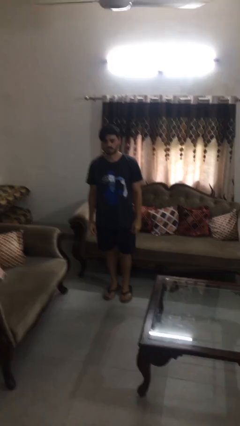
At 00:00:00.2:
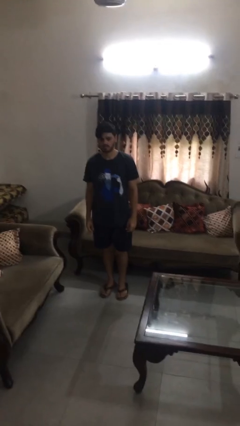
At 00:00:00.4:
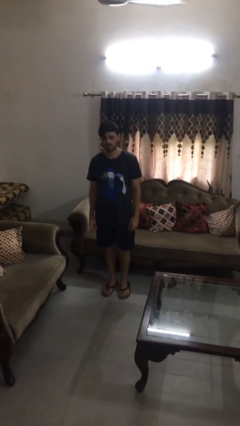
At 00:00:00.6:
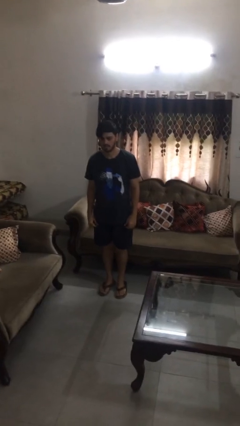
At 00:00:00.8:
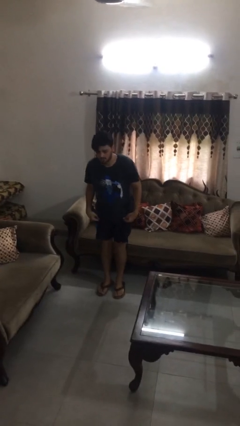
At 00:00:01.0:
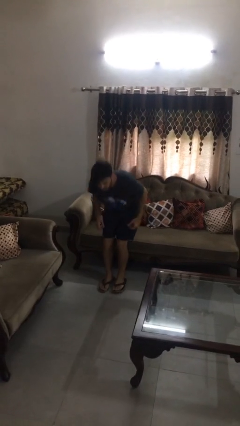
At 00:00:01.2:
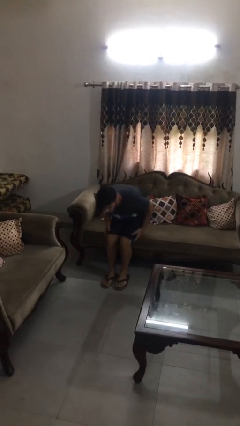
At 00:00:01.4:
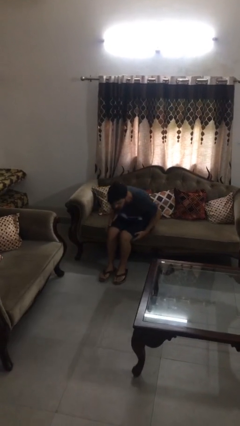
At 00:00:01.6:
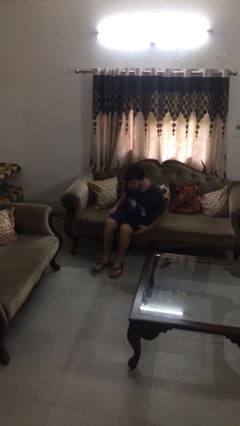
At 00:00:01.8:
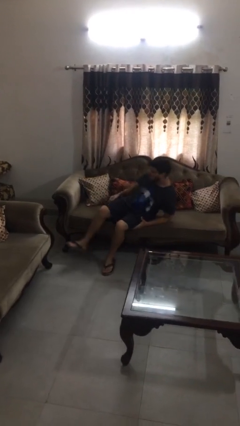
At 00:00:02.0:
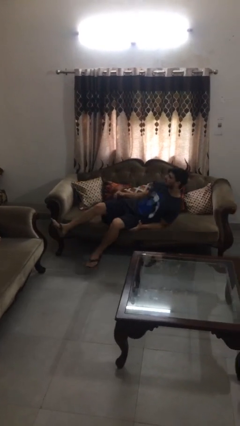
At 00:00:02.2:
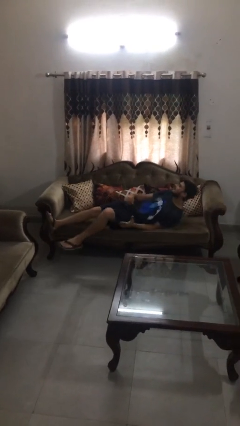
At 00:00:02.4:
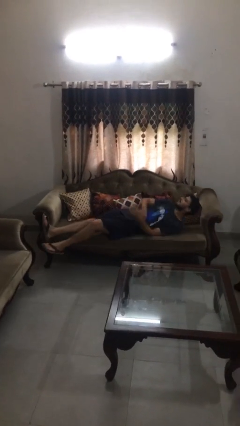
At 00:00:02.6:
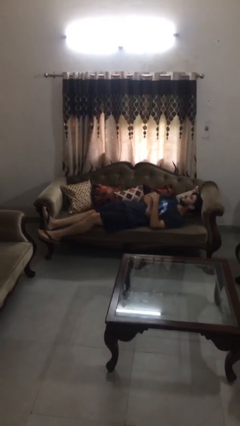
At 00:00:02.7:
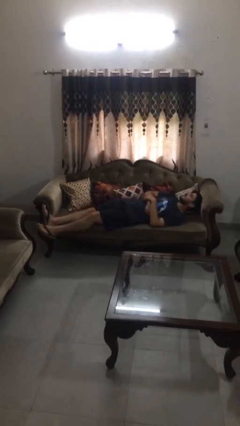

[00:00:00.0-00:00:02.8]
person lies down on couch

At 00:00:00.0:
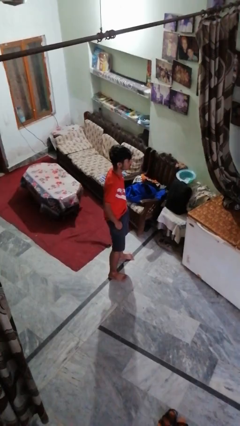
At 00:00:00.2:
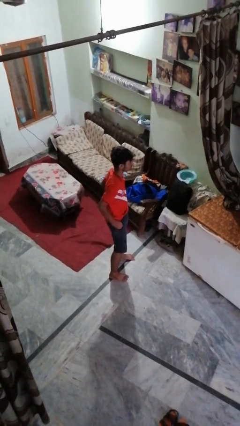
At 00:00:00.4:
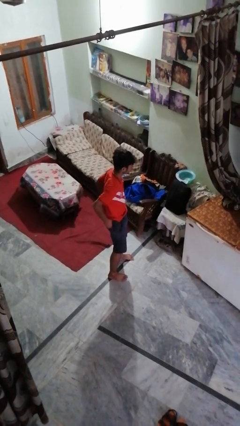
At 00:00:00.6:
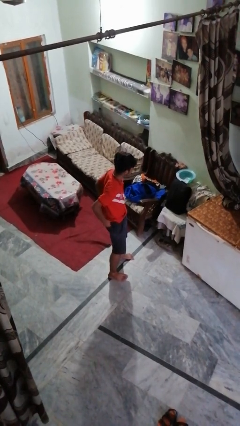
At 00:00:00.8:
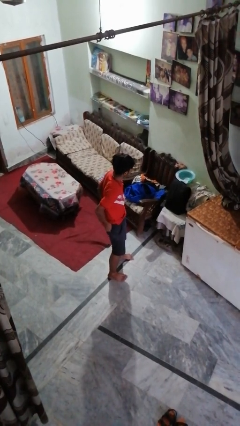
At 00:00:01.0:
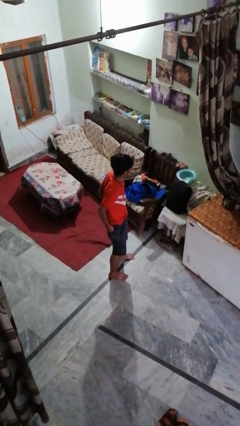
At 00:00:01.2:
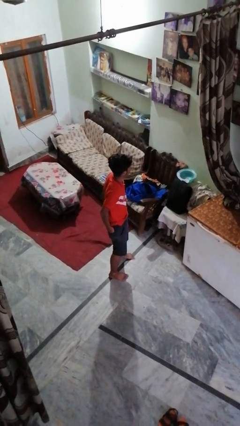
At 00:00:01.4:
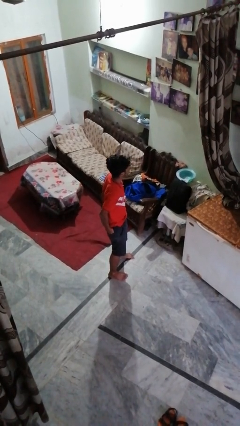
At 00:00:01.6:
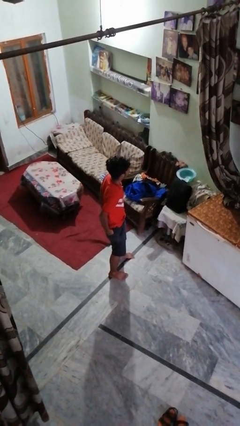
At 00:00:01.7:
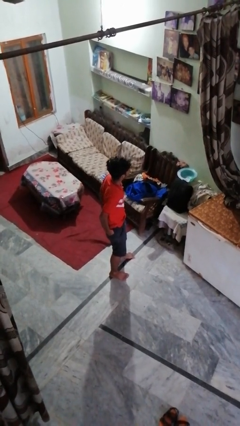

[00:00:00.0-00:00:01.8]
person puts hands in back pockets

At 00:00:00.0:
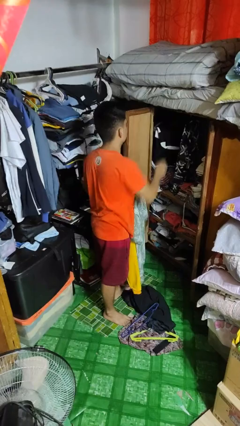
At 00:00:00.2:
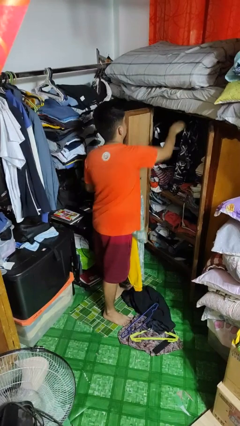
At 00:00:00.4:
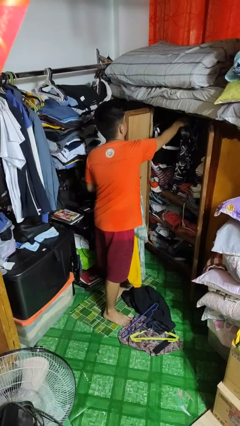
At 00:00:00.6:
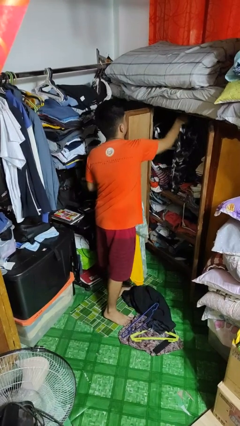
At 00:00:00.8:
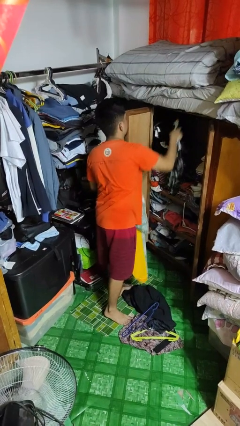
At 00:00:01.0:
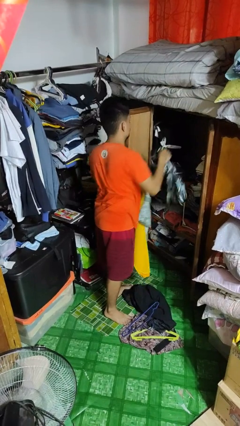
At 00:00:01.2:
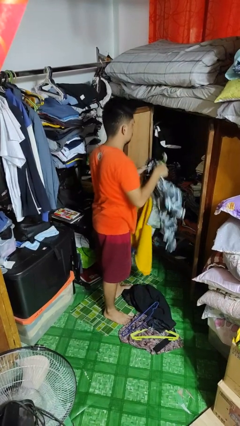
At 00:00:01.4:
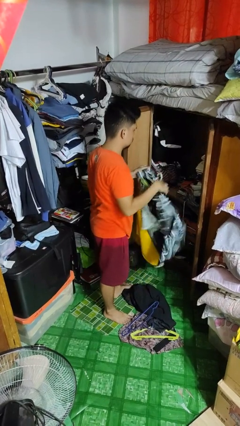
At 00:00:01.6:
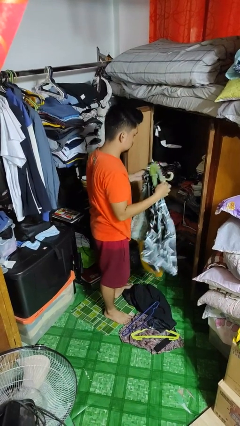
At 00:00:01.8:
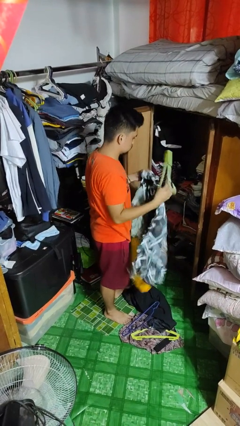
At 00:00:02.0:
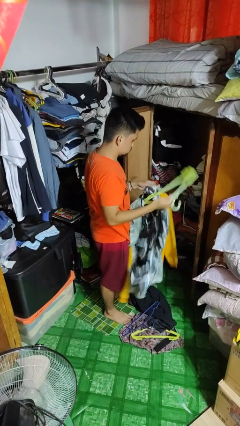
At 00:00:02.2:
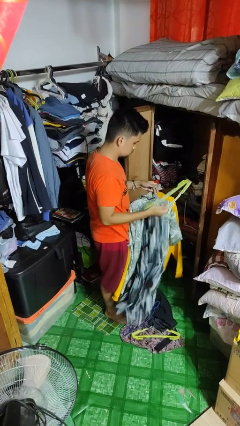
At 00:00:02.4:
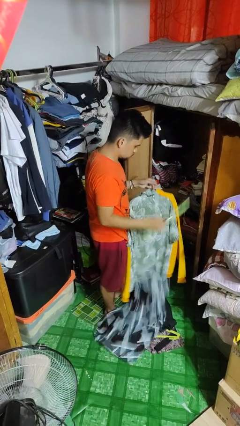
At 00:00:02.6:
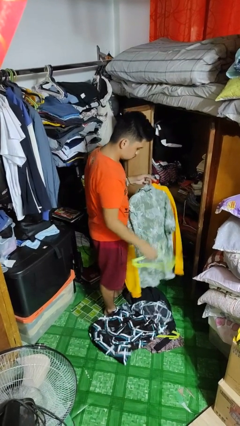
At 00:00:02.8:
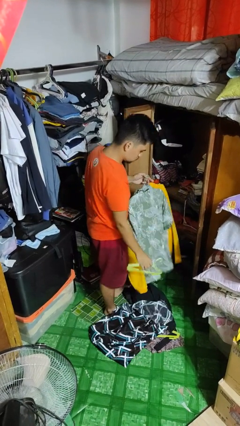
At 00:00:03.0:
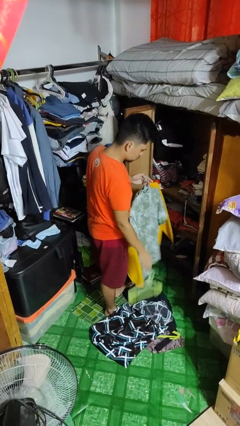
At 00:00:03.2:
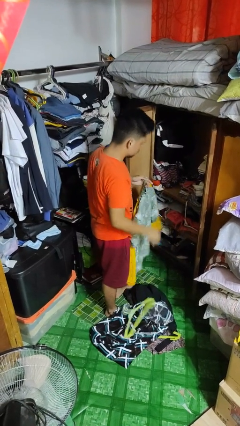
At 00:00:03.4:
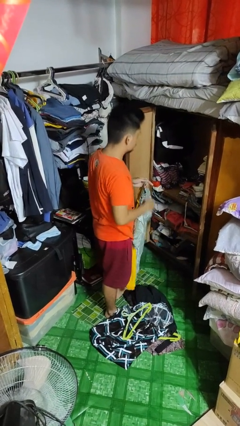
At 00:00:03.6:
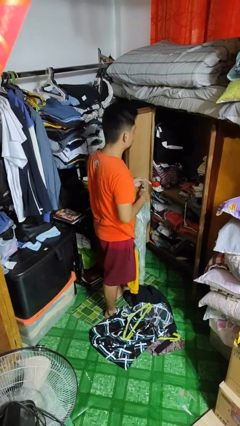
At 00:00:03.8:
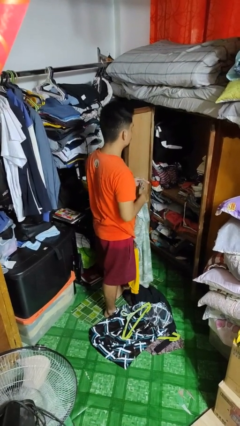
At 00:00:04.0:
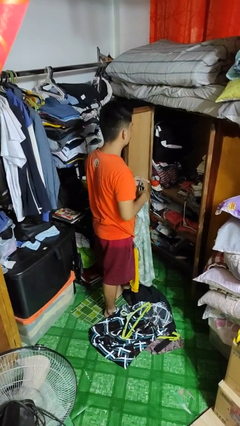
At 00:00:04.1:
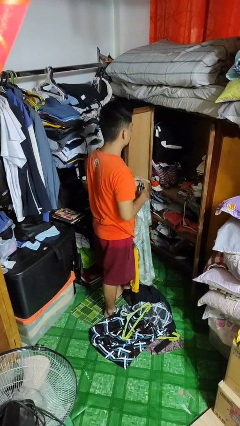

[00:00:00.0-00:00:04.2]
person takes clothes from closet

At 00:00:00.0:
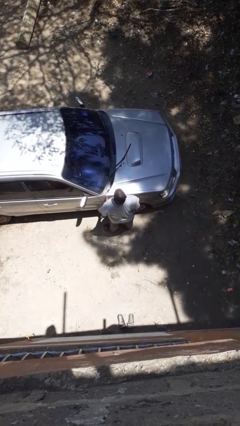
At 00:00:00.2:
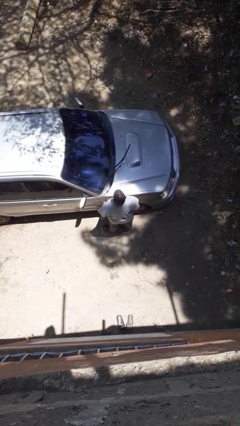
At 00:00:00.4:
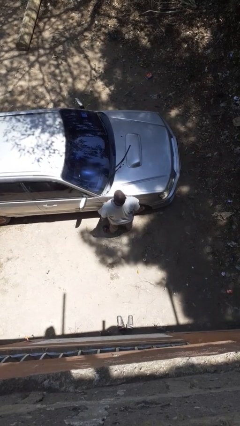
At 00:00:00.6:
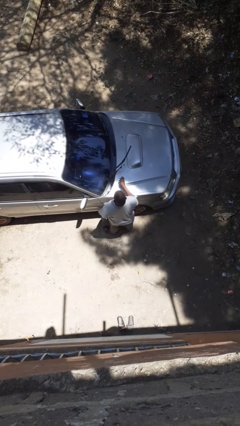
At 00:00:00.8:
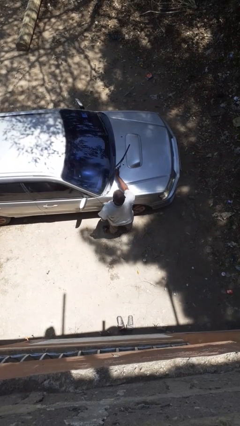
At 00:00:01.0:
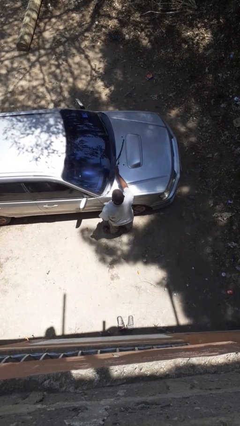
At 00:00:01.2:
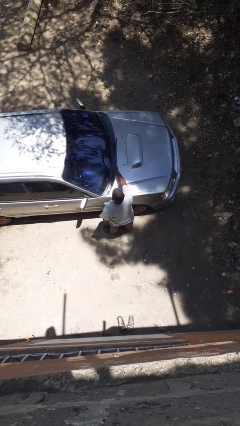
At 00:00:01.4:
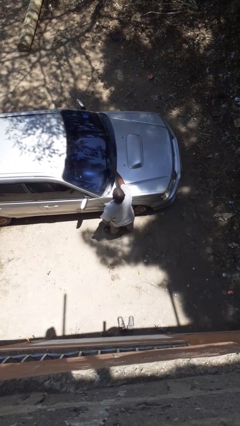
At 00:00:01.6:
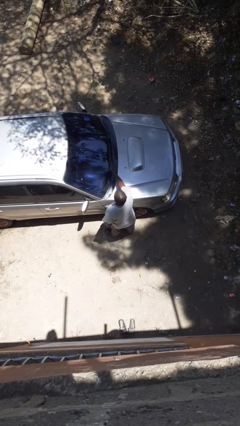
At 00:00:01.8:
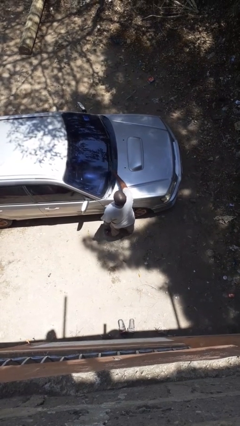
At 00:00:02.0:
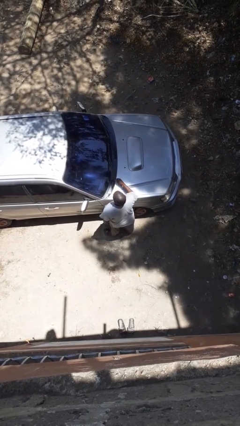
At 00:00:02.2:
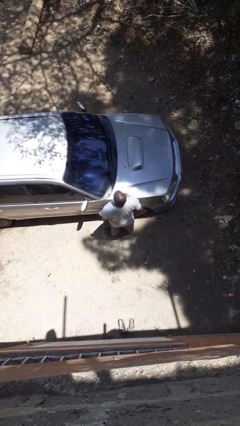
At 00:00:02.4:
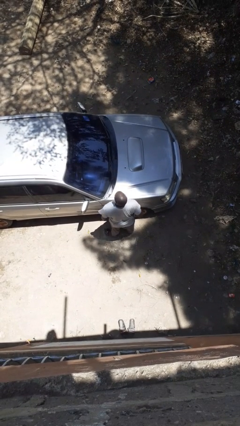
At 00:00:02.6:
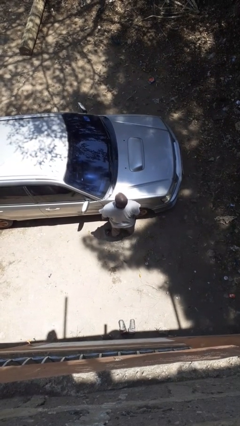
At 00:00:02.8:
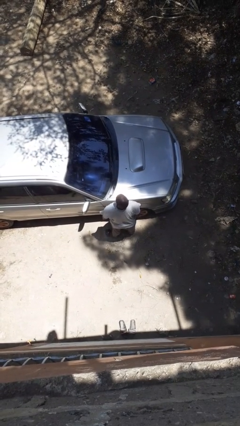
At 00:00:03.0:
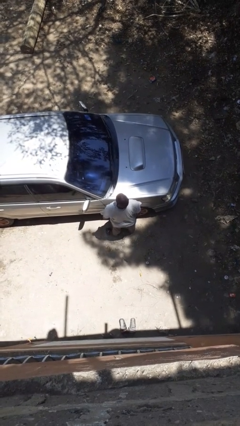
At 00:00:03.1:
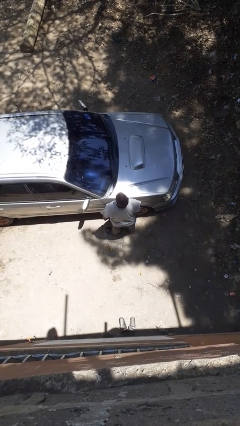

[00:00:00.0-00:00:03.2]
person flips down car wipers

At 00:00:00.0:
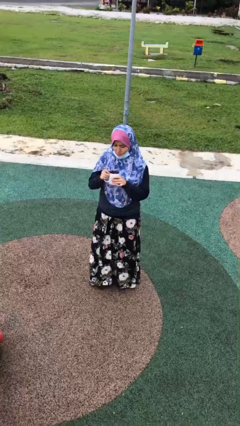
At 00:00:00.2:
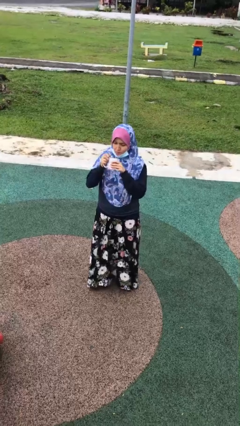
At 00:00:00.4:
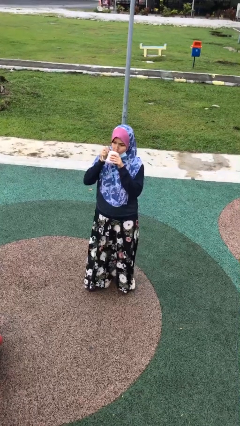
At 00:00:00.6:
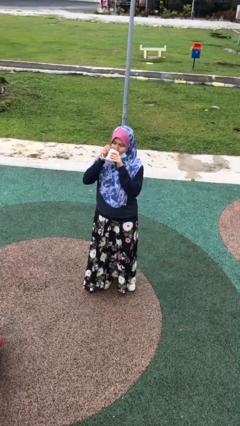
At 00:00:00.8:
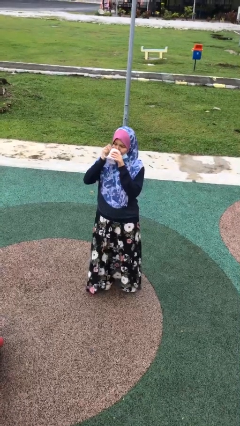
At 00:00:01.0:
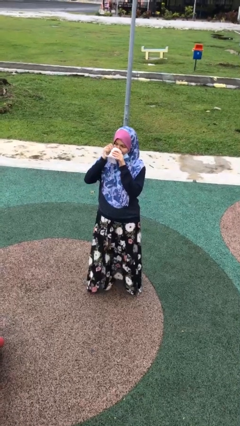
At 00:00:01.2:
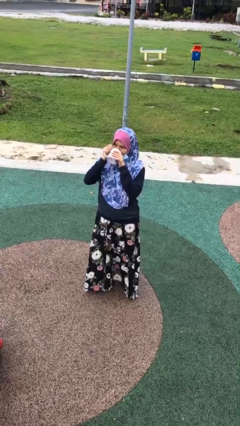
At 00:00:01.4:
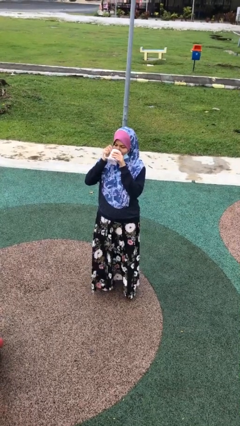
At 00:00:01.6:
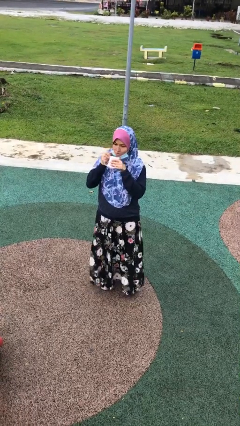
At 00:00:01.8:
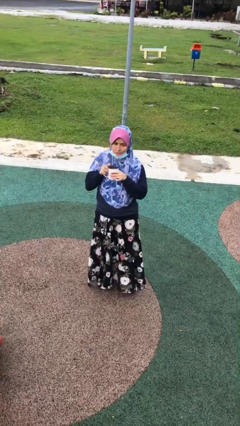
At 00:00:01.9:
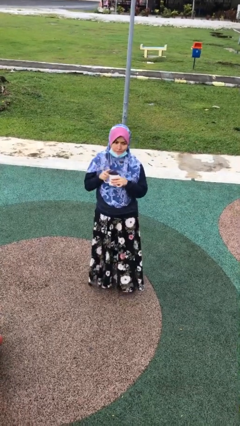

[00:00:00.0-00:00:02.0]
person drinks from mug

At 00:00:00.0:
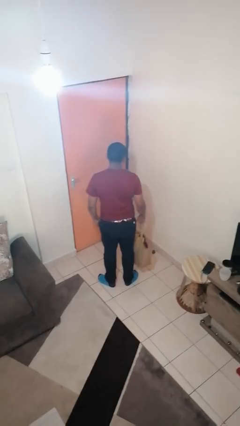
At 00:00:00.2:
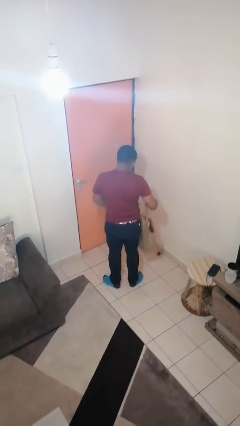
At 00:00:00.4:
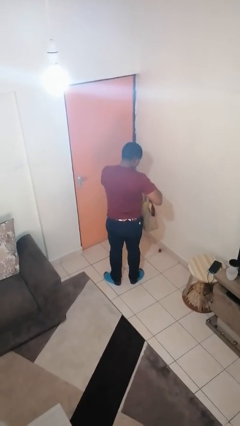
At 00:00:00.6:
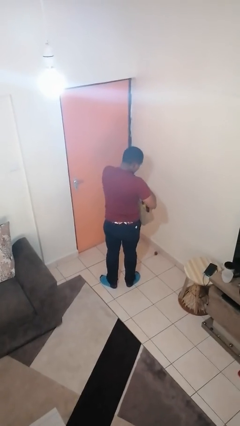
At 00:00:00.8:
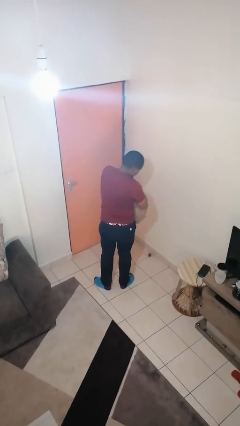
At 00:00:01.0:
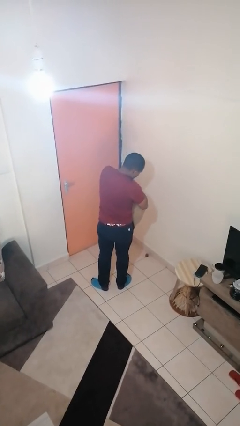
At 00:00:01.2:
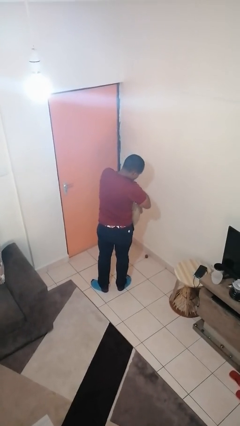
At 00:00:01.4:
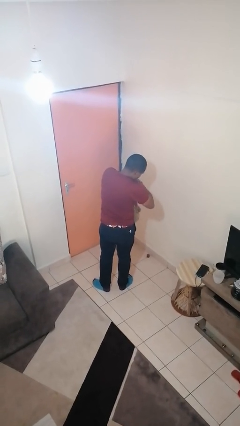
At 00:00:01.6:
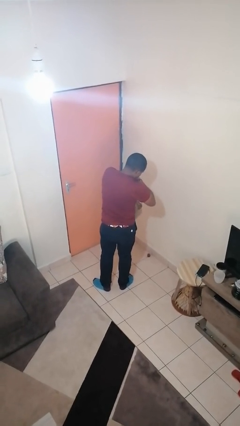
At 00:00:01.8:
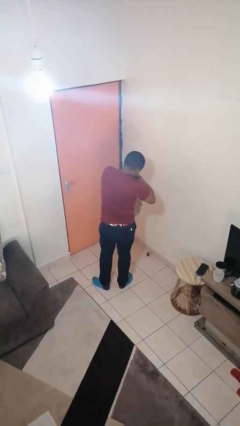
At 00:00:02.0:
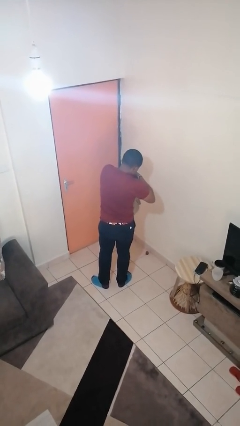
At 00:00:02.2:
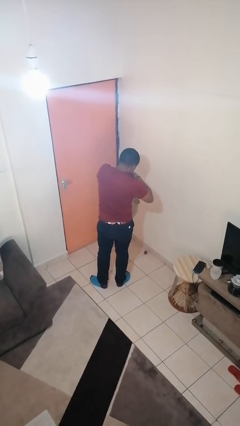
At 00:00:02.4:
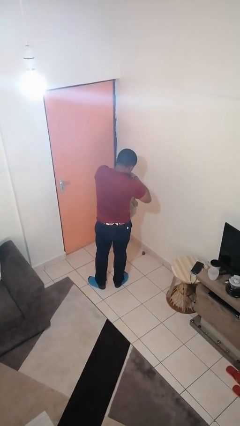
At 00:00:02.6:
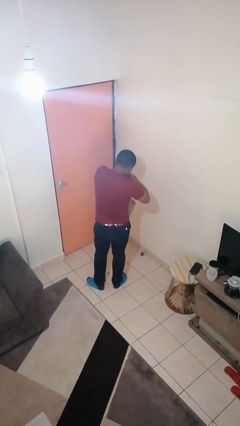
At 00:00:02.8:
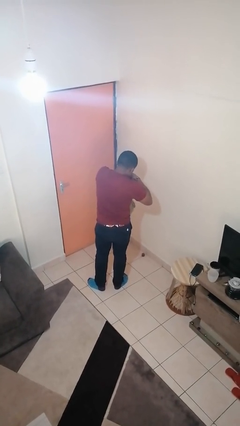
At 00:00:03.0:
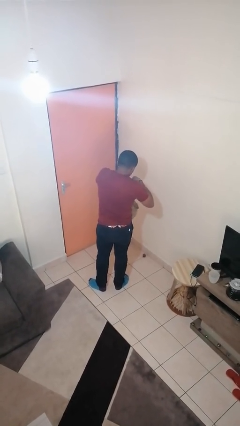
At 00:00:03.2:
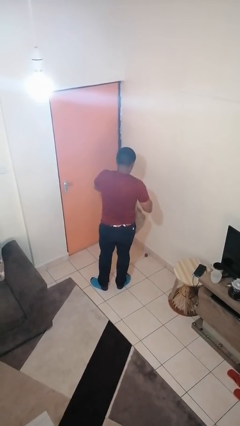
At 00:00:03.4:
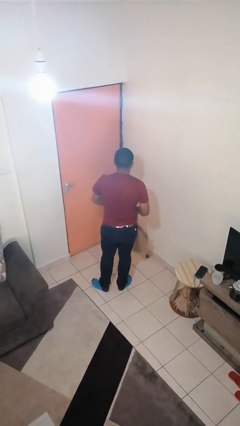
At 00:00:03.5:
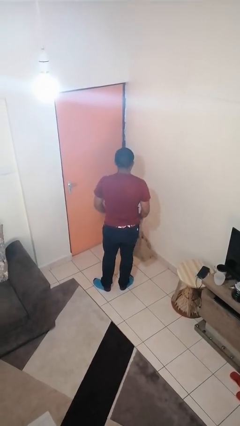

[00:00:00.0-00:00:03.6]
person searches in bag
